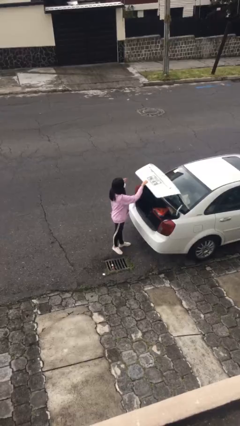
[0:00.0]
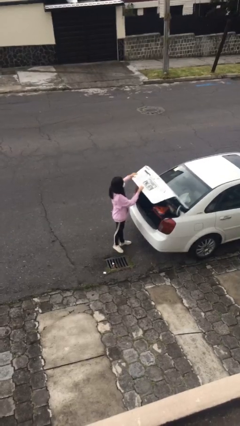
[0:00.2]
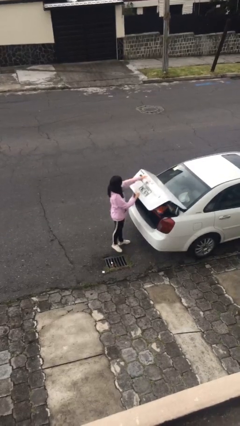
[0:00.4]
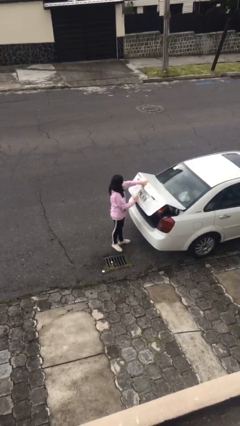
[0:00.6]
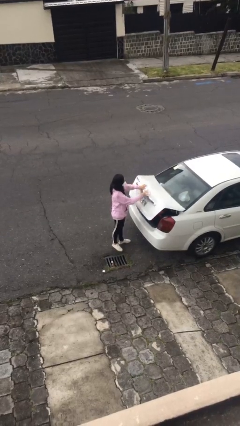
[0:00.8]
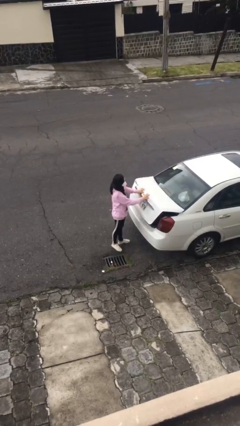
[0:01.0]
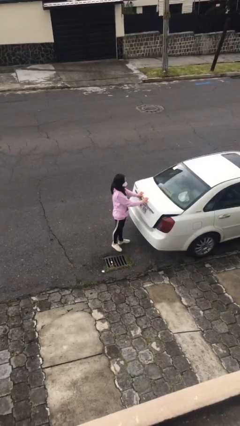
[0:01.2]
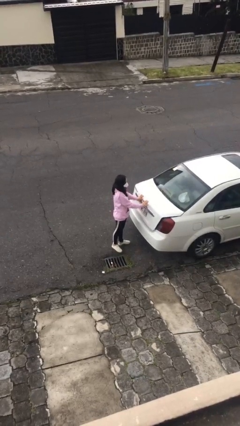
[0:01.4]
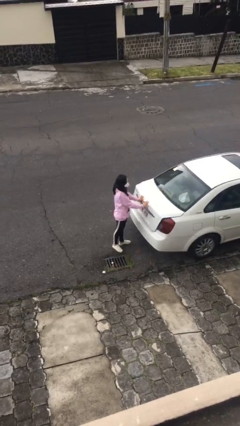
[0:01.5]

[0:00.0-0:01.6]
person closes car trunk

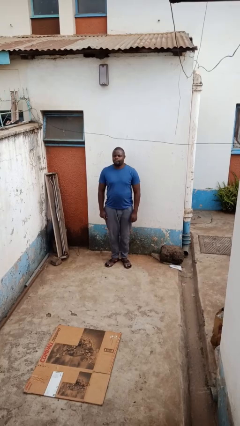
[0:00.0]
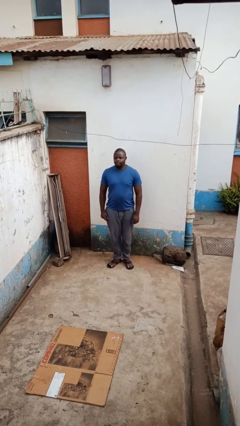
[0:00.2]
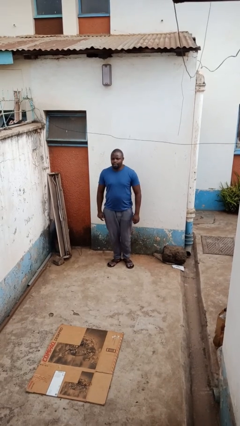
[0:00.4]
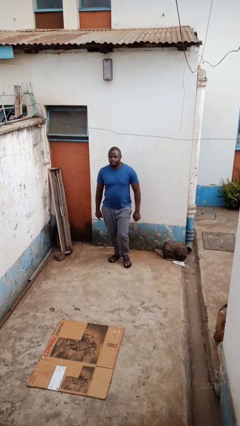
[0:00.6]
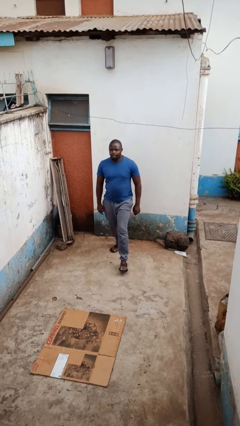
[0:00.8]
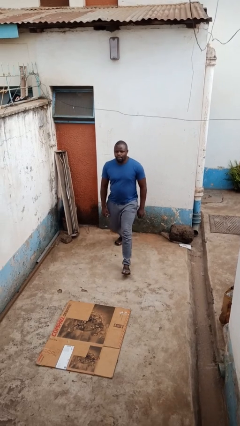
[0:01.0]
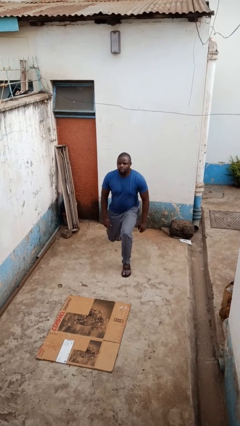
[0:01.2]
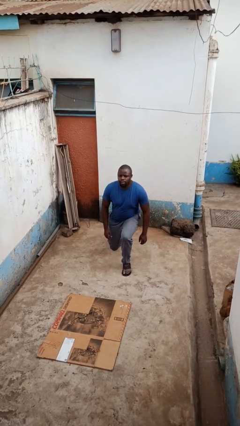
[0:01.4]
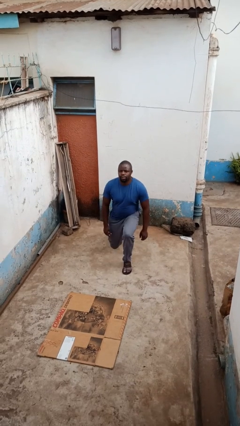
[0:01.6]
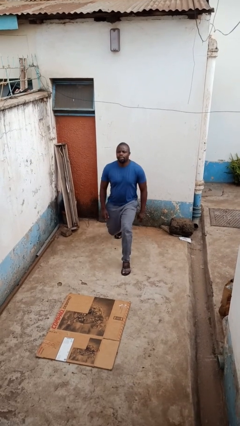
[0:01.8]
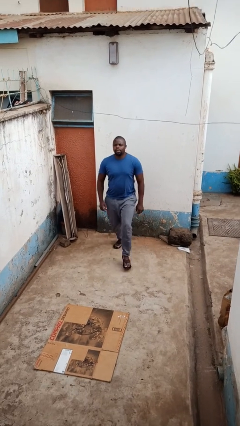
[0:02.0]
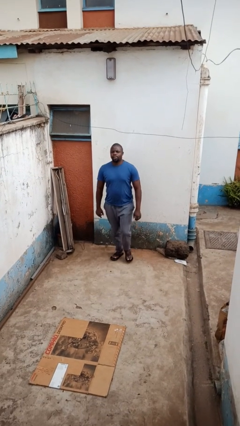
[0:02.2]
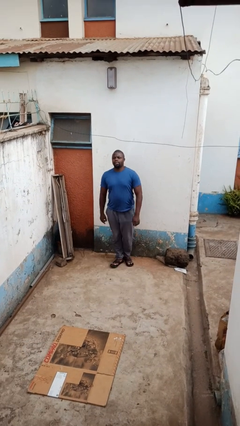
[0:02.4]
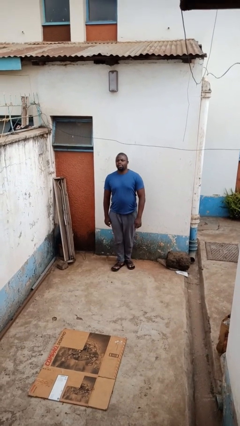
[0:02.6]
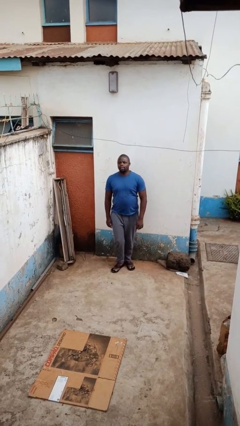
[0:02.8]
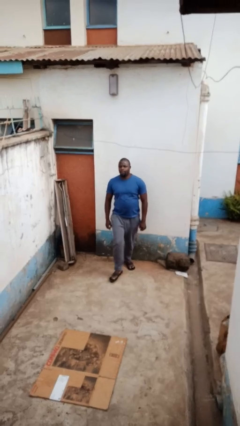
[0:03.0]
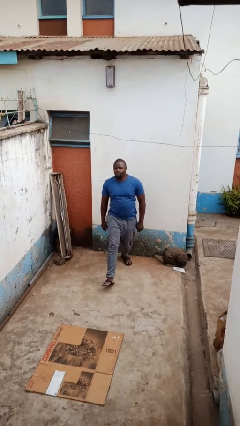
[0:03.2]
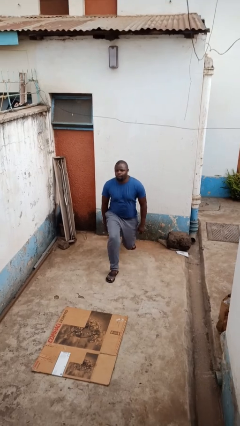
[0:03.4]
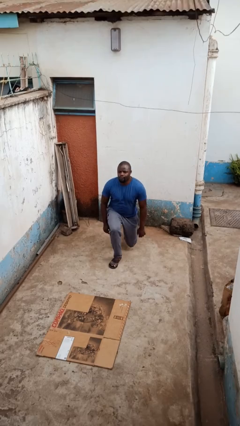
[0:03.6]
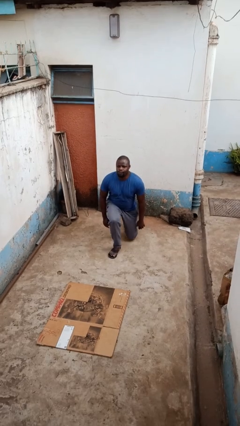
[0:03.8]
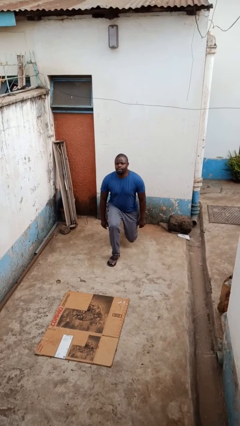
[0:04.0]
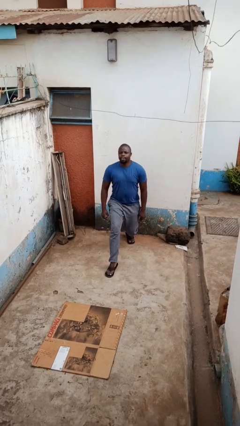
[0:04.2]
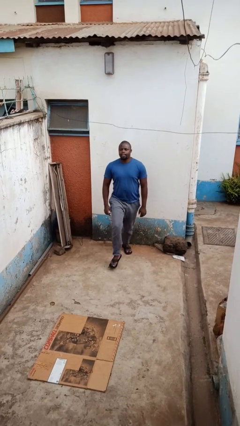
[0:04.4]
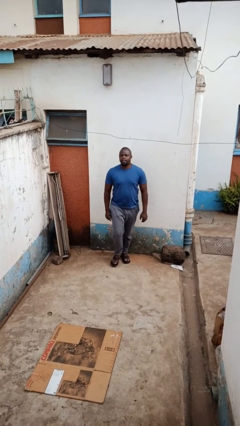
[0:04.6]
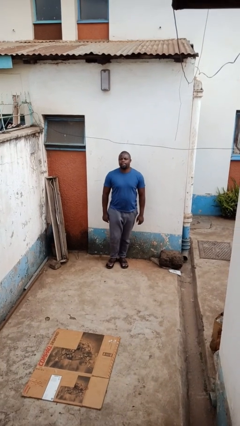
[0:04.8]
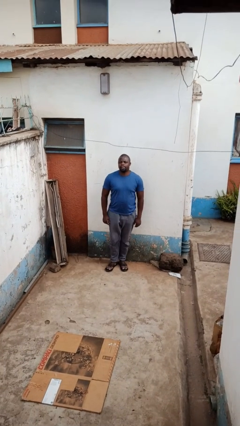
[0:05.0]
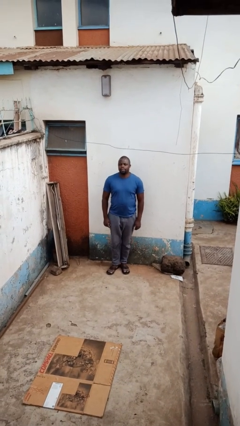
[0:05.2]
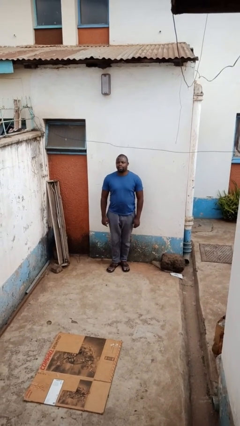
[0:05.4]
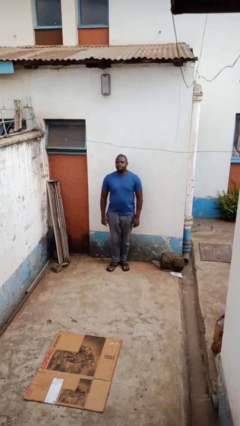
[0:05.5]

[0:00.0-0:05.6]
person exercises with lunges

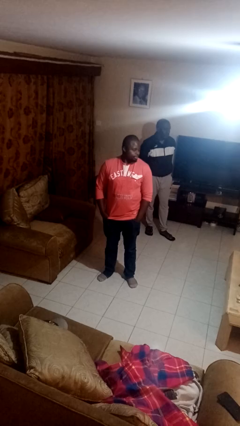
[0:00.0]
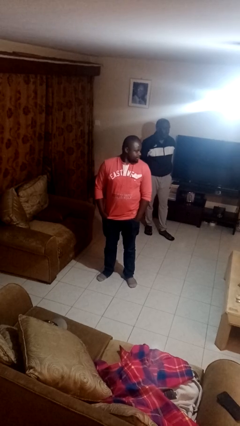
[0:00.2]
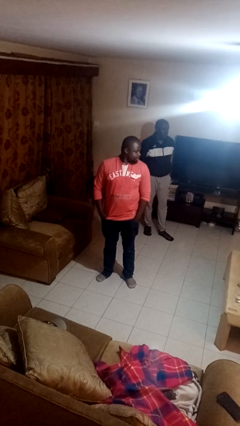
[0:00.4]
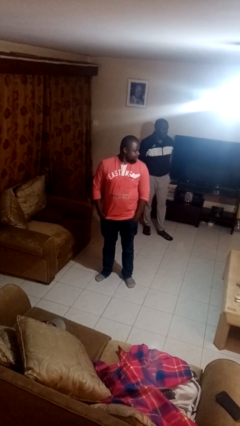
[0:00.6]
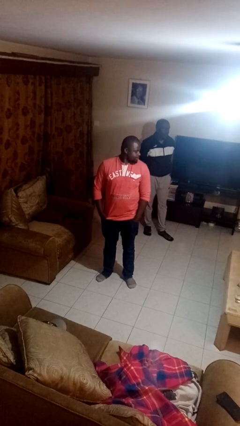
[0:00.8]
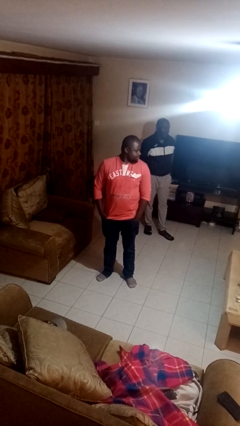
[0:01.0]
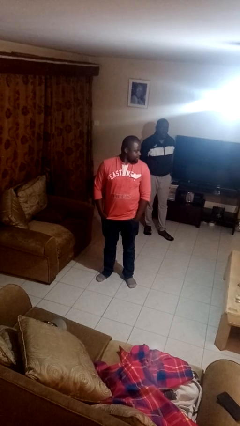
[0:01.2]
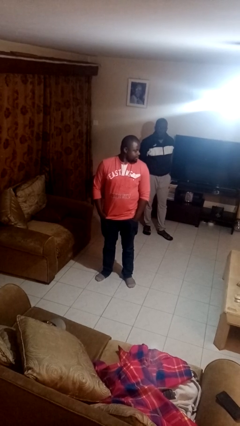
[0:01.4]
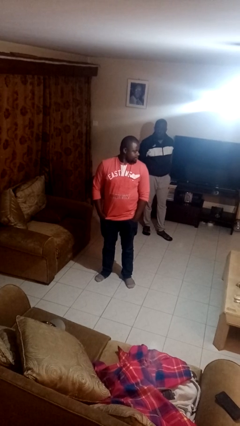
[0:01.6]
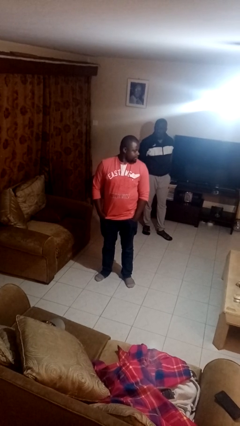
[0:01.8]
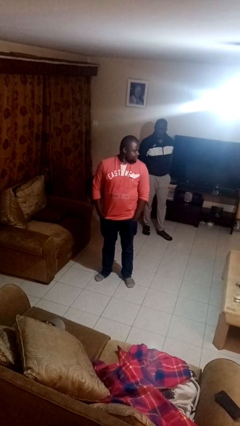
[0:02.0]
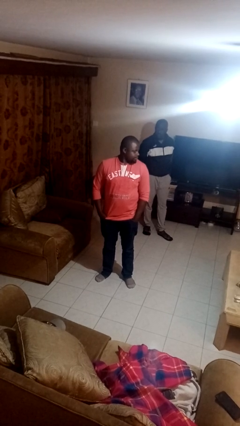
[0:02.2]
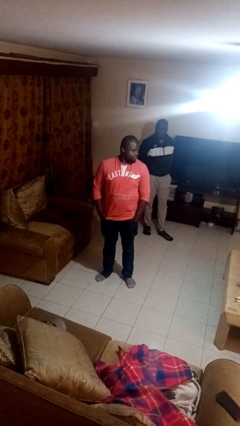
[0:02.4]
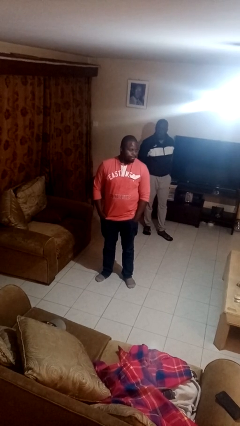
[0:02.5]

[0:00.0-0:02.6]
person looks over shoulder

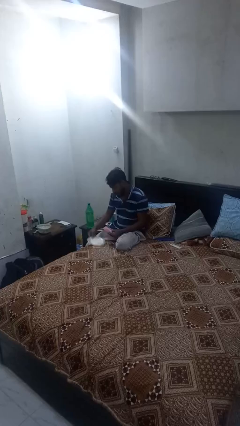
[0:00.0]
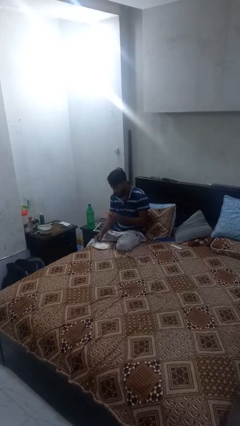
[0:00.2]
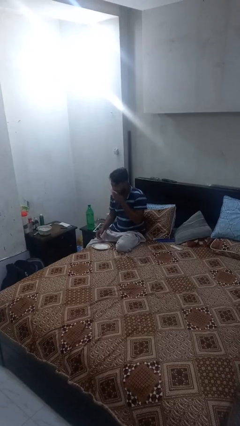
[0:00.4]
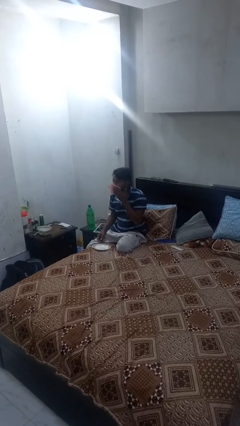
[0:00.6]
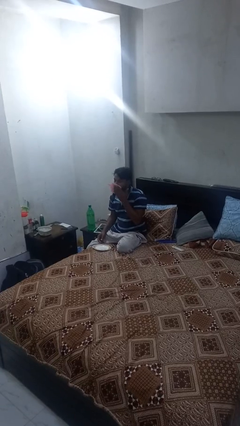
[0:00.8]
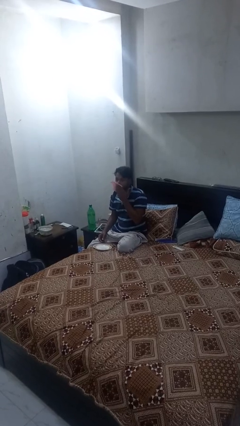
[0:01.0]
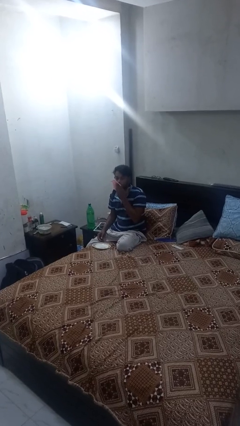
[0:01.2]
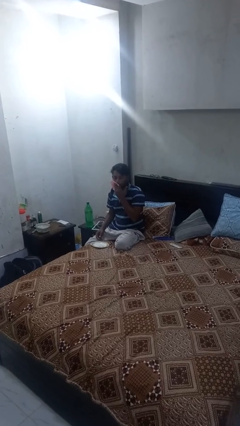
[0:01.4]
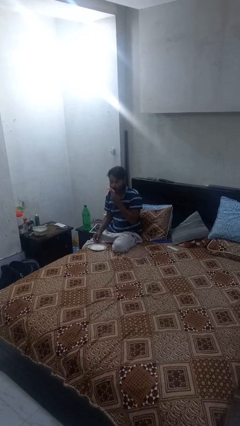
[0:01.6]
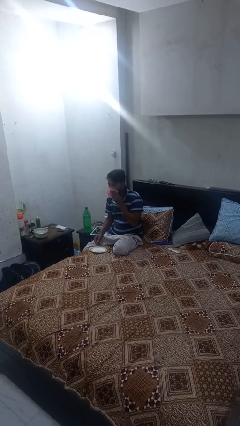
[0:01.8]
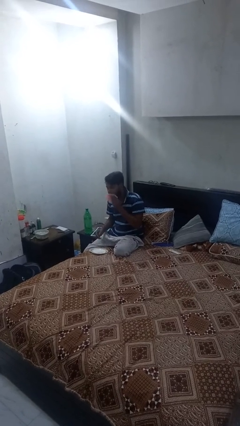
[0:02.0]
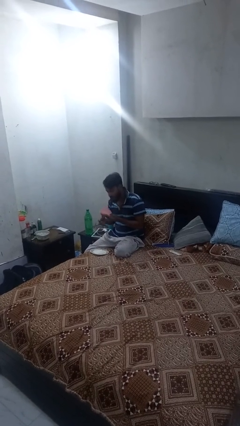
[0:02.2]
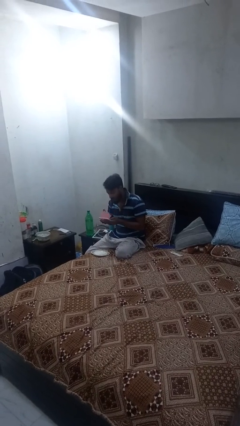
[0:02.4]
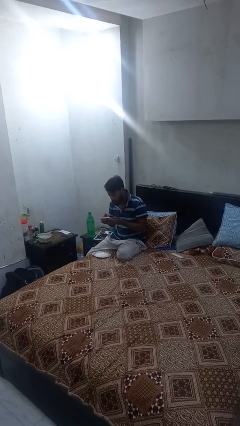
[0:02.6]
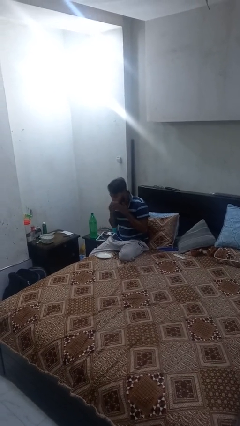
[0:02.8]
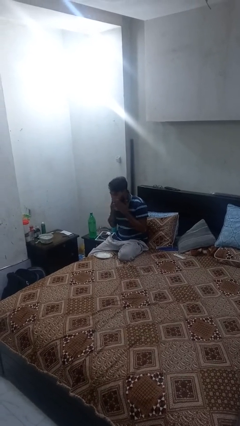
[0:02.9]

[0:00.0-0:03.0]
person wipes mouth with napkin

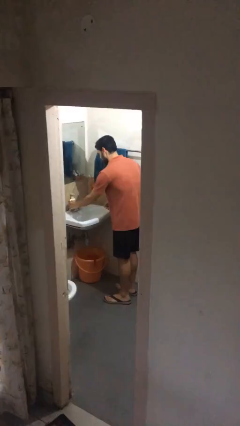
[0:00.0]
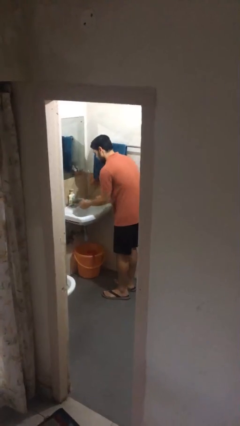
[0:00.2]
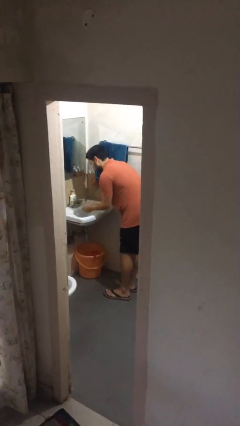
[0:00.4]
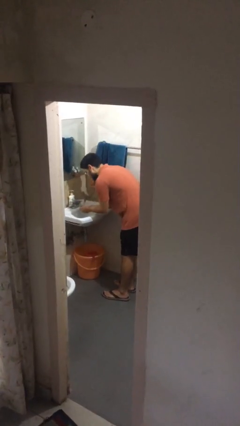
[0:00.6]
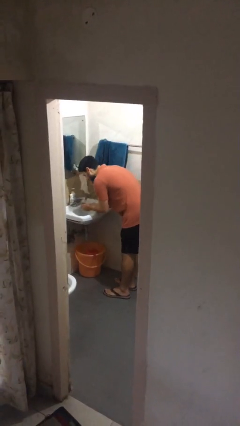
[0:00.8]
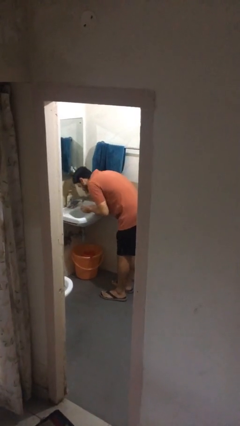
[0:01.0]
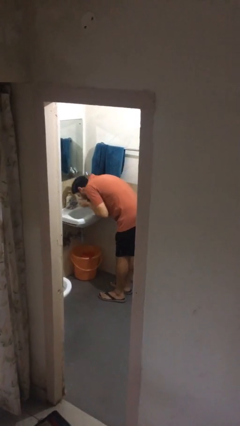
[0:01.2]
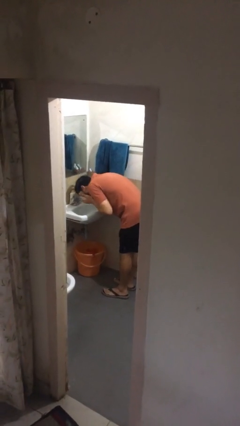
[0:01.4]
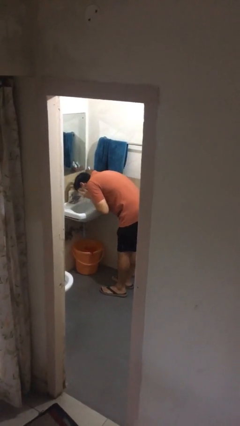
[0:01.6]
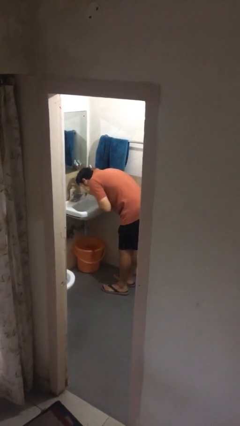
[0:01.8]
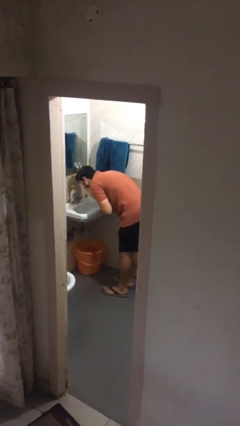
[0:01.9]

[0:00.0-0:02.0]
person washes face

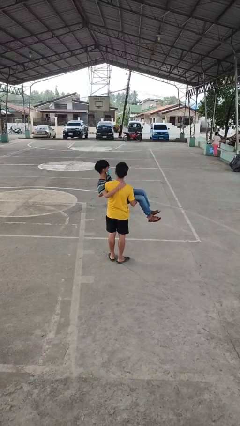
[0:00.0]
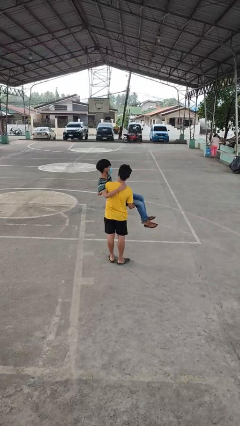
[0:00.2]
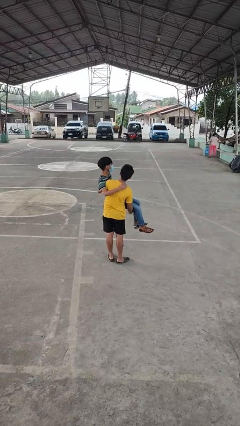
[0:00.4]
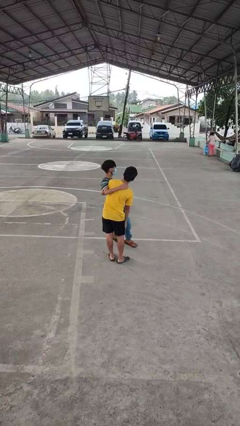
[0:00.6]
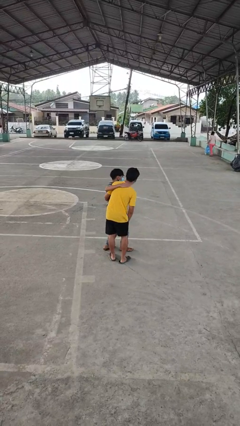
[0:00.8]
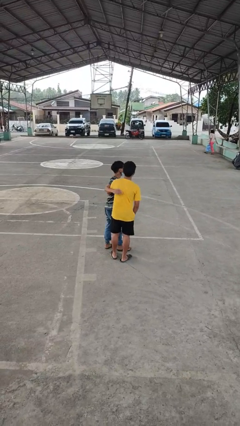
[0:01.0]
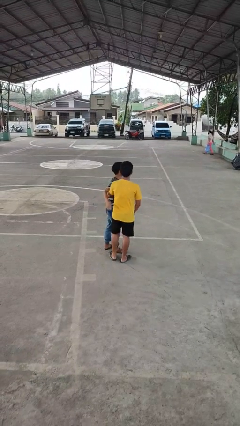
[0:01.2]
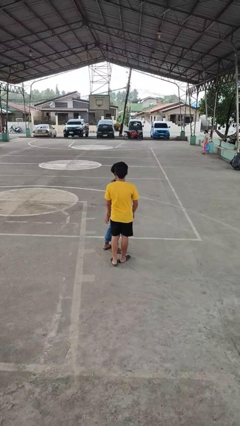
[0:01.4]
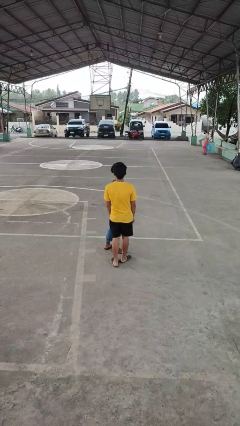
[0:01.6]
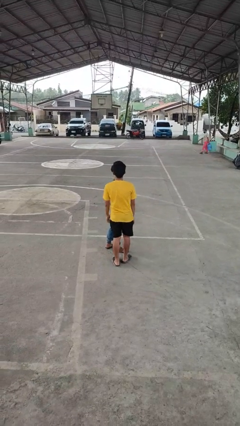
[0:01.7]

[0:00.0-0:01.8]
person puts down person

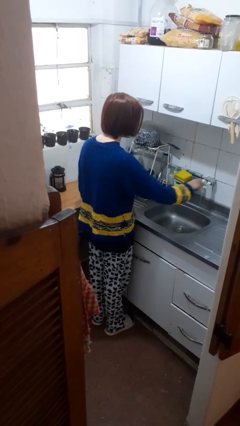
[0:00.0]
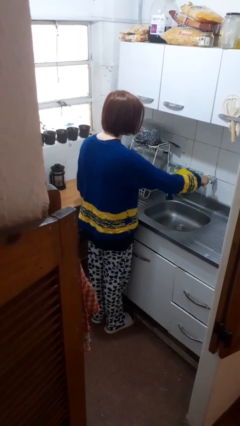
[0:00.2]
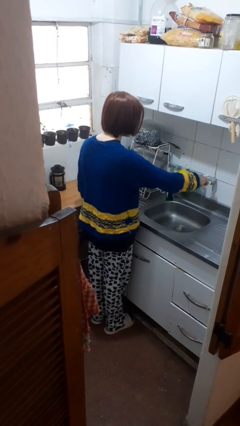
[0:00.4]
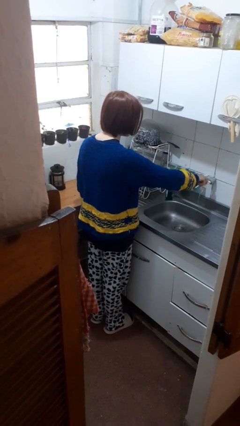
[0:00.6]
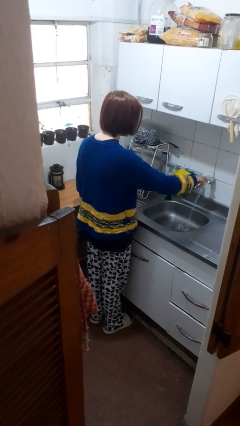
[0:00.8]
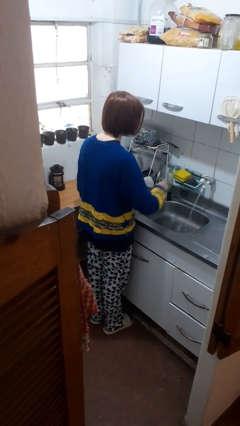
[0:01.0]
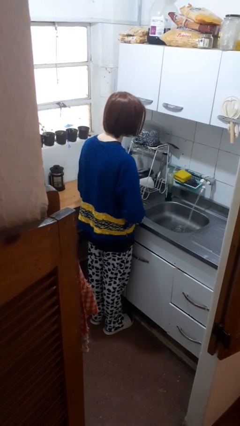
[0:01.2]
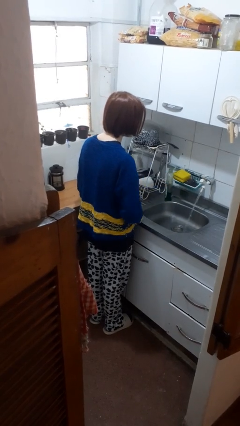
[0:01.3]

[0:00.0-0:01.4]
person turns on faucet
